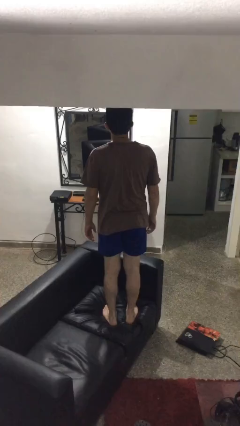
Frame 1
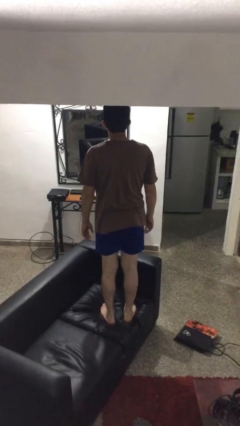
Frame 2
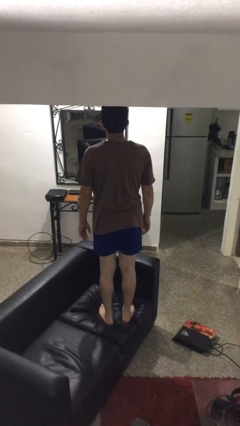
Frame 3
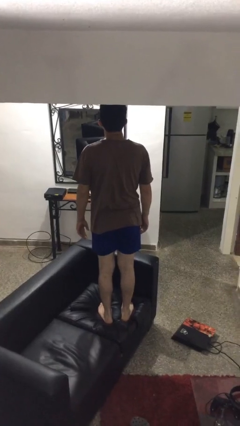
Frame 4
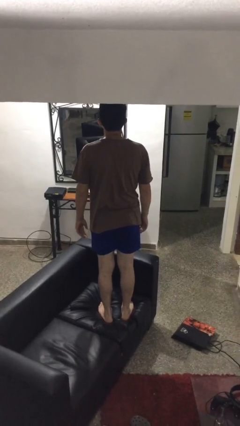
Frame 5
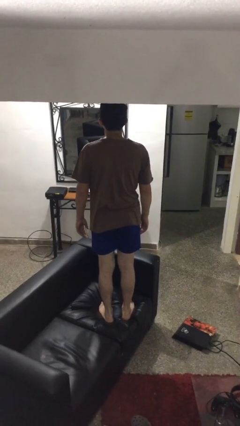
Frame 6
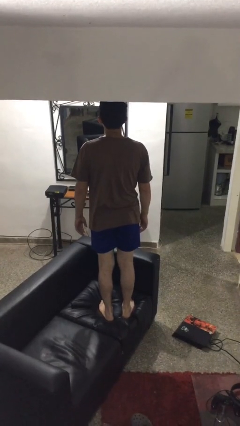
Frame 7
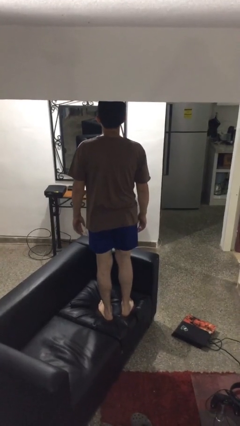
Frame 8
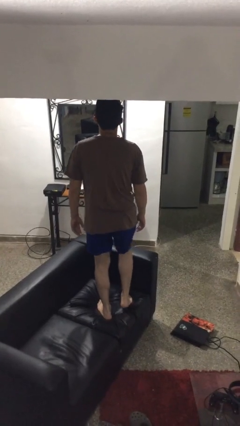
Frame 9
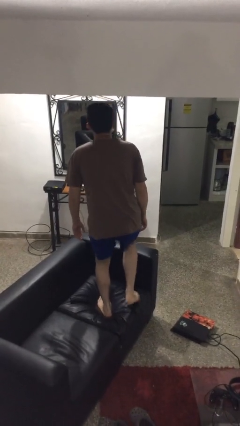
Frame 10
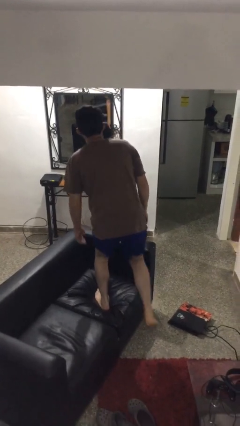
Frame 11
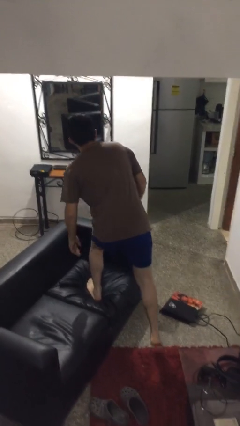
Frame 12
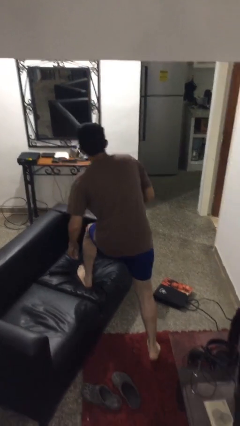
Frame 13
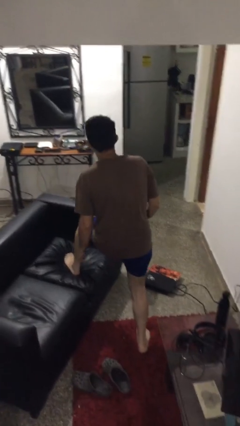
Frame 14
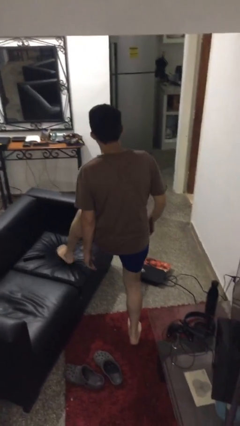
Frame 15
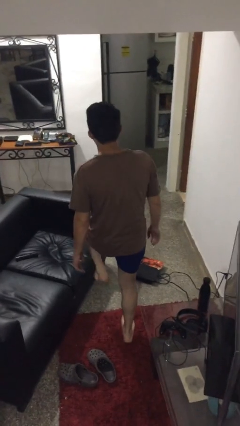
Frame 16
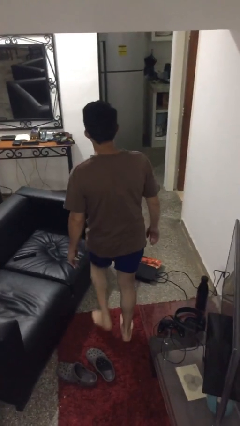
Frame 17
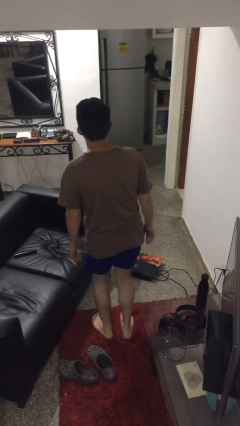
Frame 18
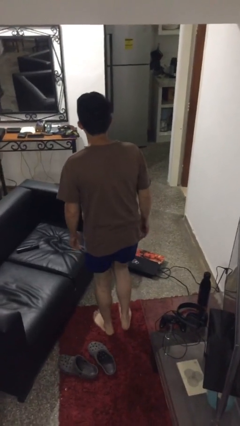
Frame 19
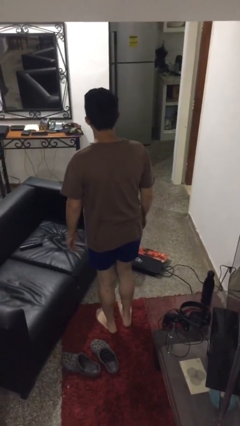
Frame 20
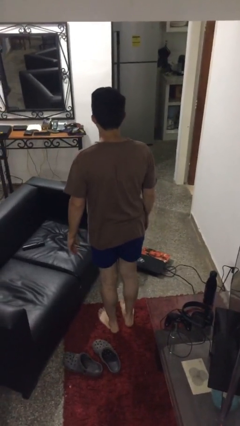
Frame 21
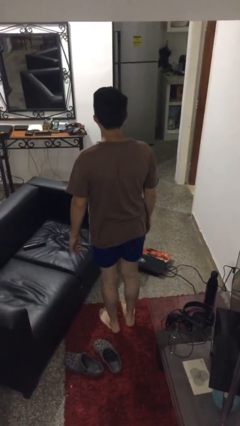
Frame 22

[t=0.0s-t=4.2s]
person climbs off couch

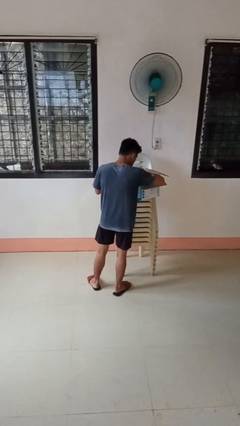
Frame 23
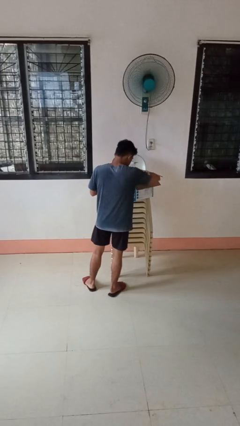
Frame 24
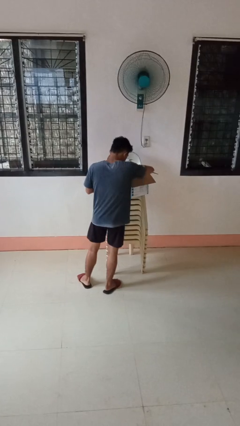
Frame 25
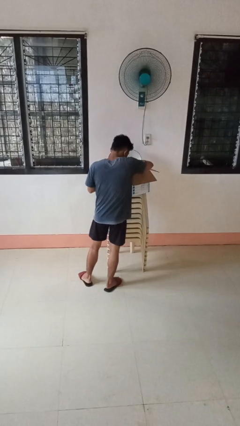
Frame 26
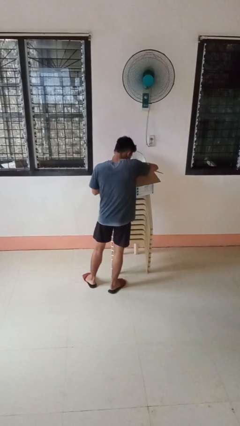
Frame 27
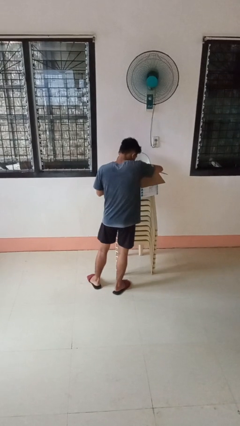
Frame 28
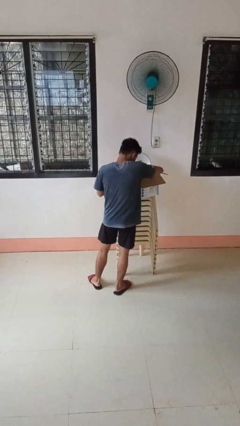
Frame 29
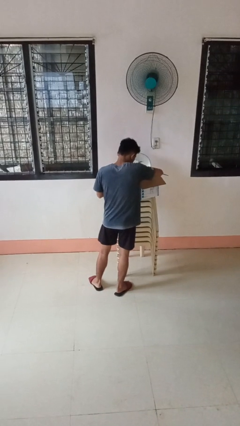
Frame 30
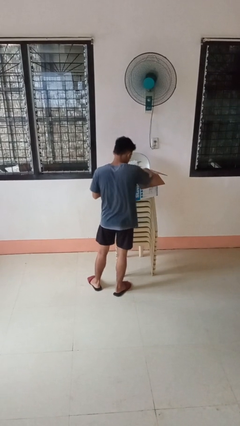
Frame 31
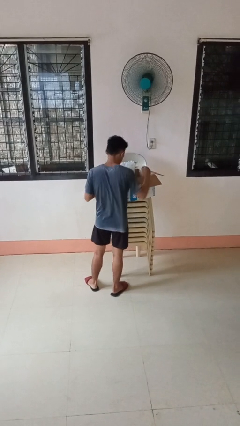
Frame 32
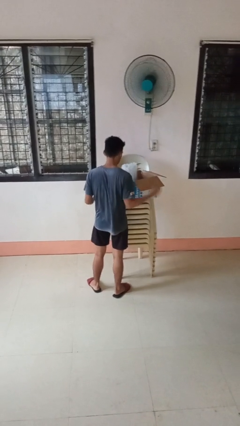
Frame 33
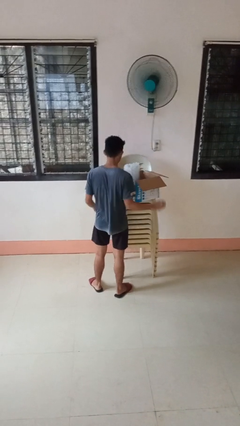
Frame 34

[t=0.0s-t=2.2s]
person searches in box

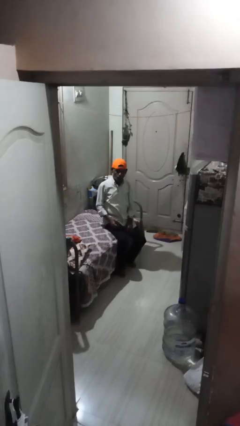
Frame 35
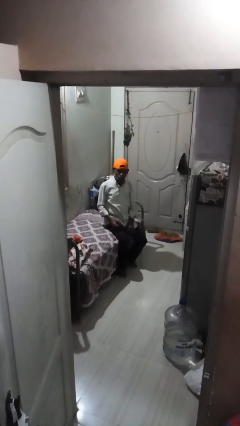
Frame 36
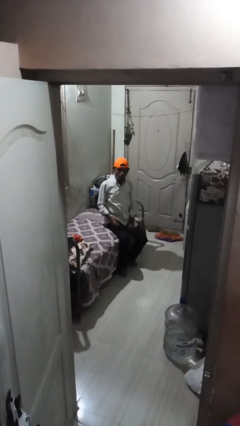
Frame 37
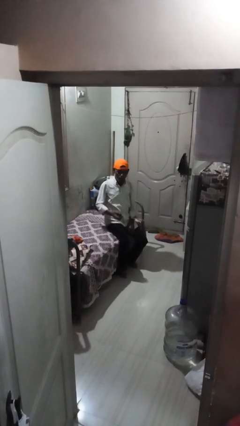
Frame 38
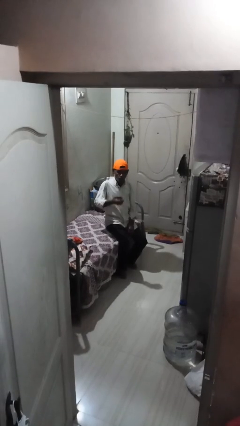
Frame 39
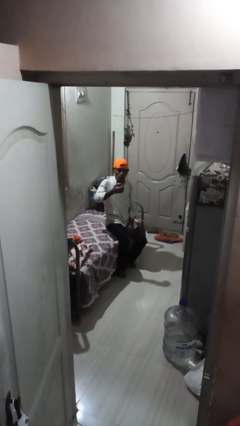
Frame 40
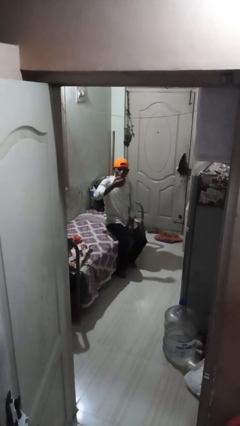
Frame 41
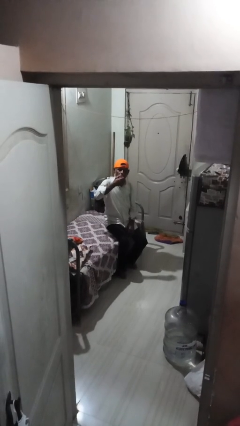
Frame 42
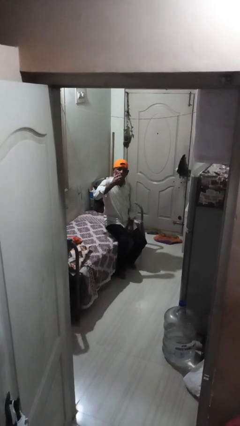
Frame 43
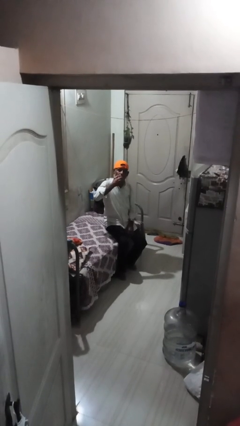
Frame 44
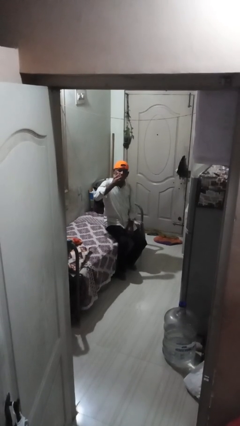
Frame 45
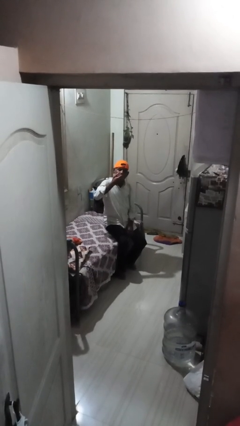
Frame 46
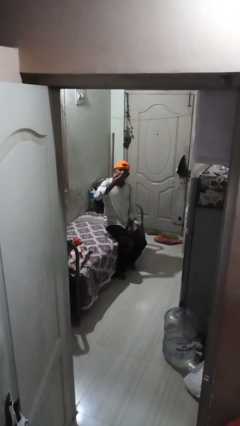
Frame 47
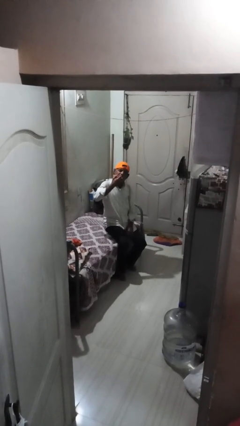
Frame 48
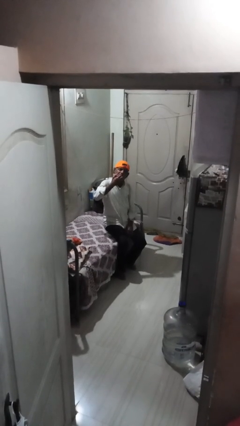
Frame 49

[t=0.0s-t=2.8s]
person eats apple

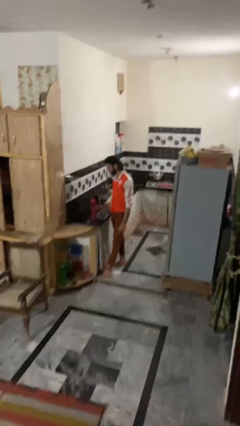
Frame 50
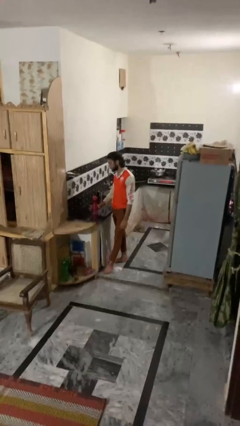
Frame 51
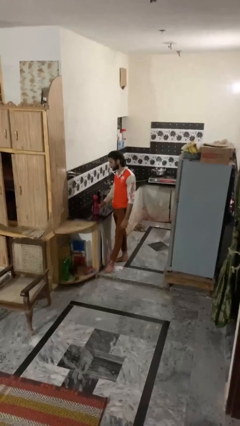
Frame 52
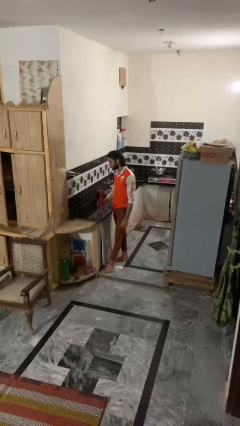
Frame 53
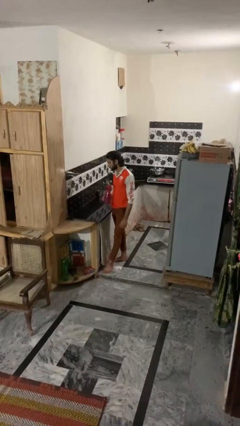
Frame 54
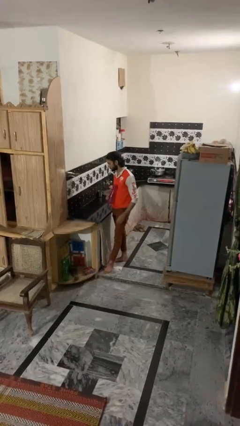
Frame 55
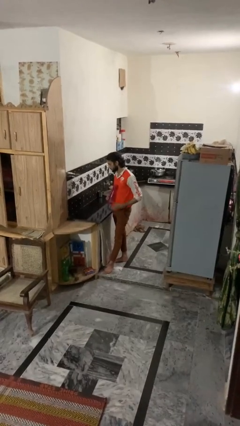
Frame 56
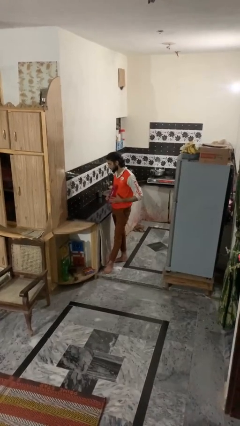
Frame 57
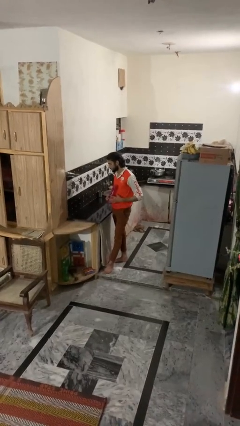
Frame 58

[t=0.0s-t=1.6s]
person picks up object from countertop

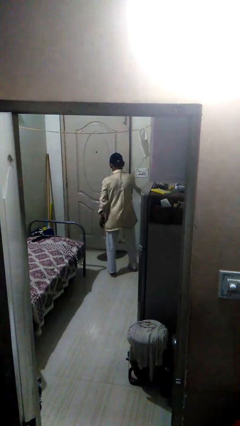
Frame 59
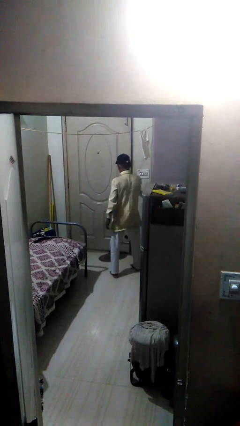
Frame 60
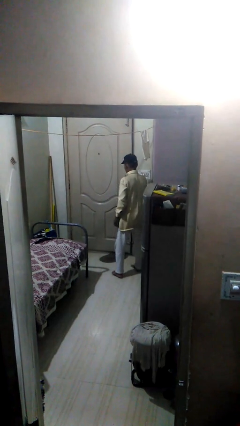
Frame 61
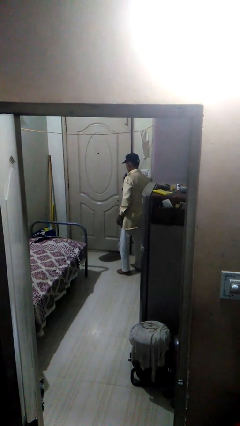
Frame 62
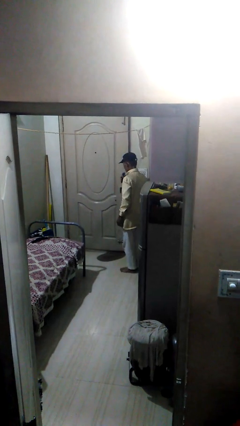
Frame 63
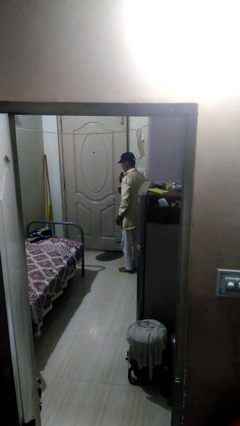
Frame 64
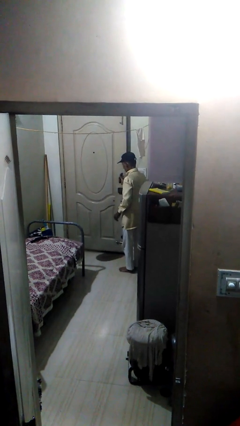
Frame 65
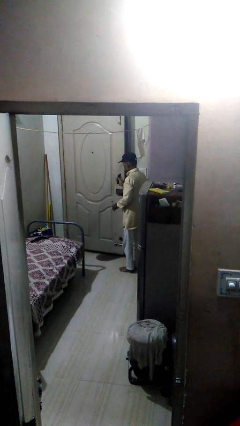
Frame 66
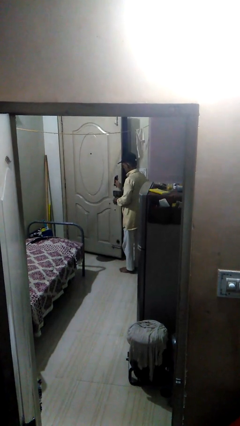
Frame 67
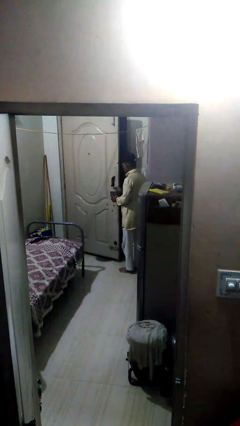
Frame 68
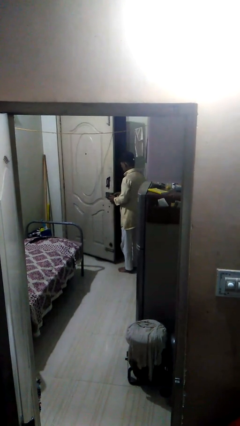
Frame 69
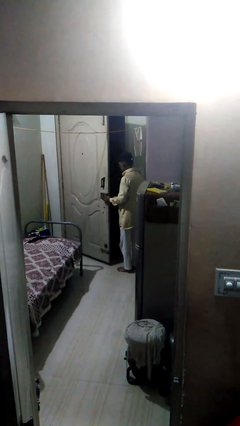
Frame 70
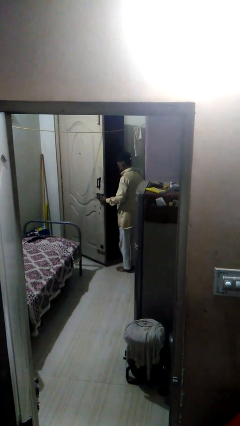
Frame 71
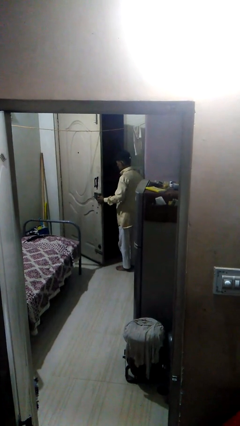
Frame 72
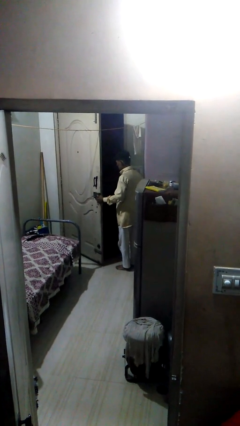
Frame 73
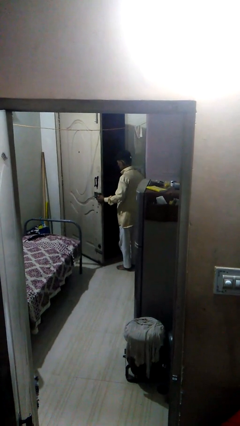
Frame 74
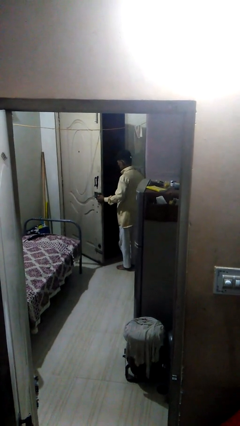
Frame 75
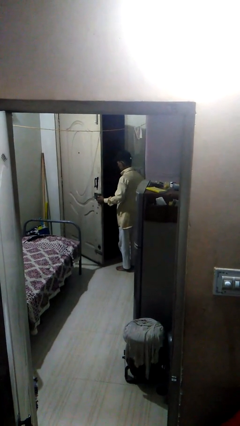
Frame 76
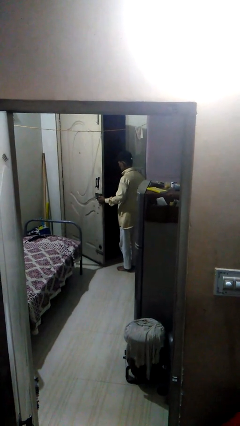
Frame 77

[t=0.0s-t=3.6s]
person opens facility door

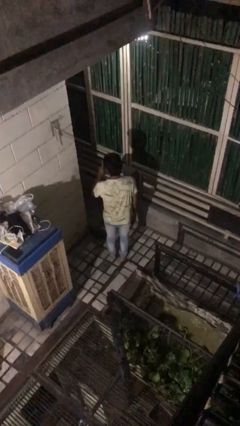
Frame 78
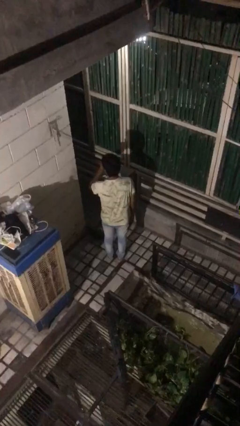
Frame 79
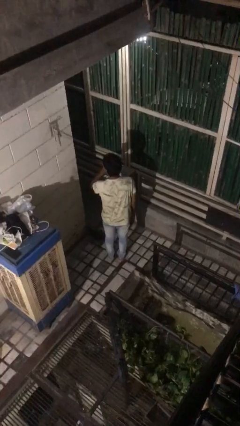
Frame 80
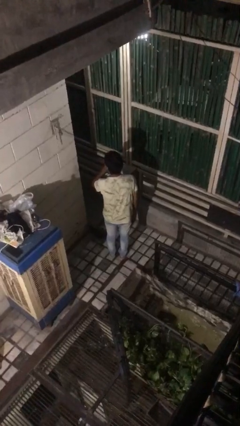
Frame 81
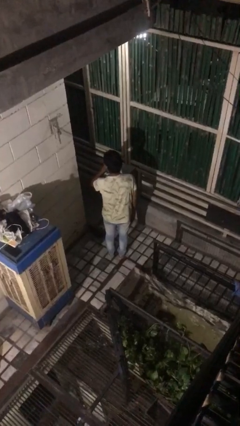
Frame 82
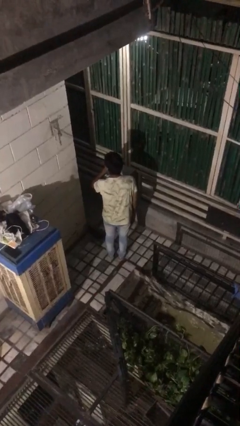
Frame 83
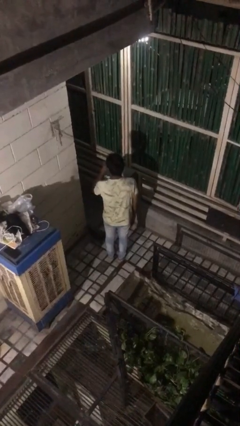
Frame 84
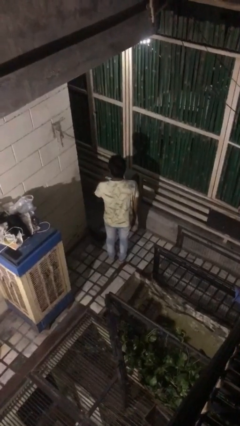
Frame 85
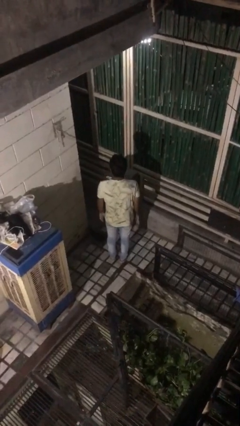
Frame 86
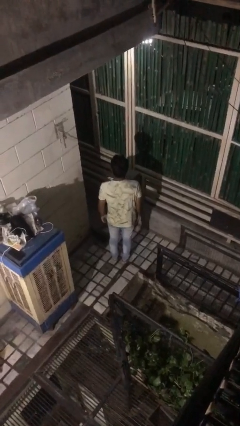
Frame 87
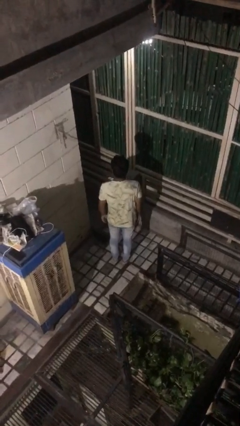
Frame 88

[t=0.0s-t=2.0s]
person gestures be quiet

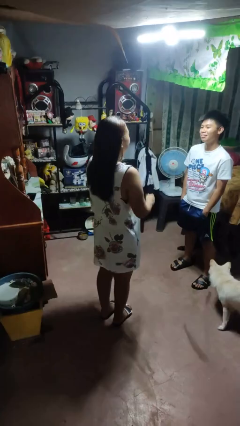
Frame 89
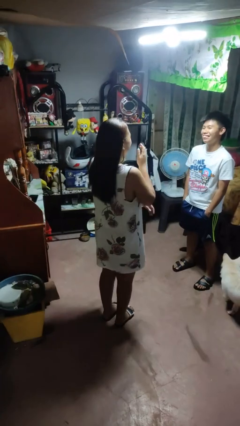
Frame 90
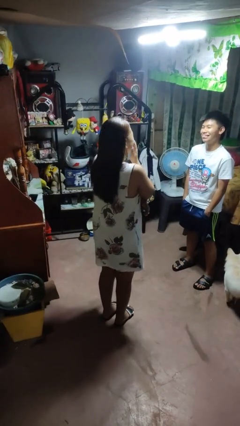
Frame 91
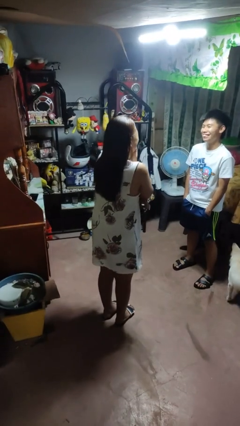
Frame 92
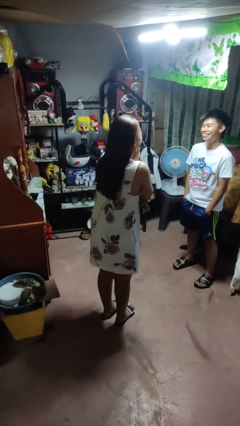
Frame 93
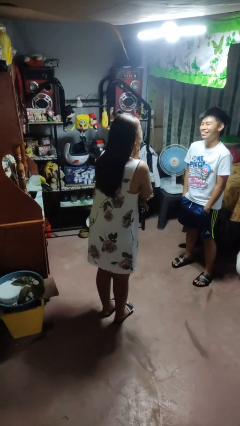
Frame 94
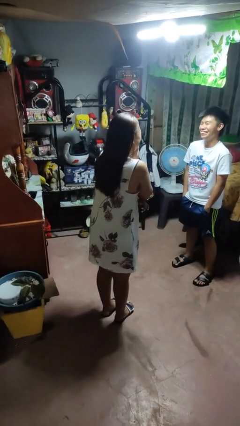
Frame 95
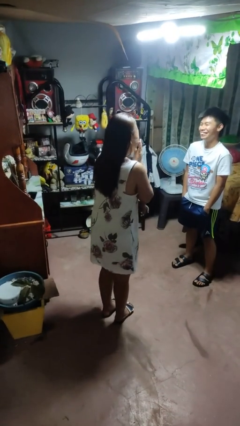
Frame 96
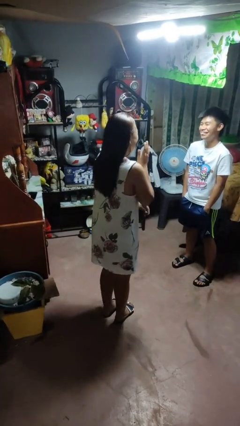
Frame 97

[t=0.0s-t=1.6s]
person laughs with person
